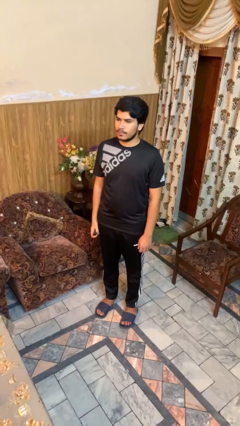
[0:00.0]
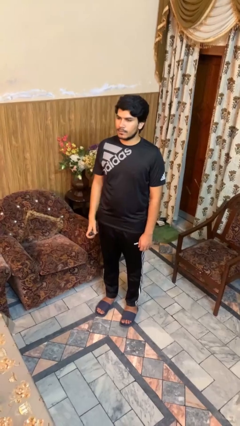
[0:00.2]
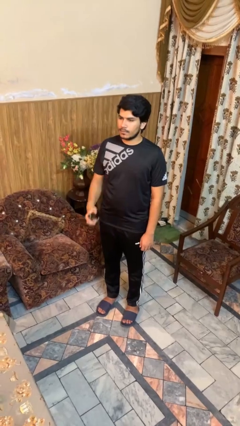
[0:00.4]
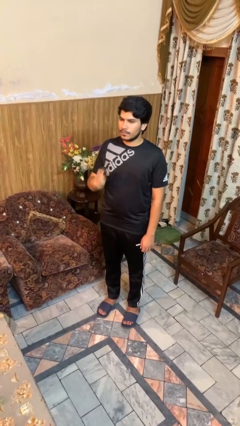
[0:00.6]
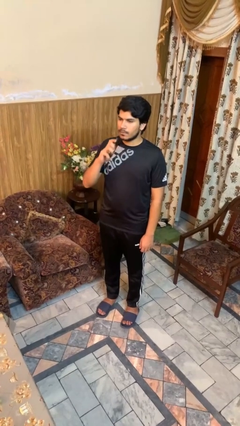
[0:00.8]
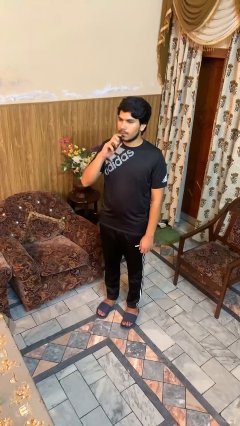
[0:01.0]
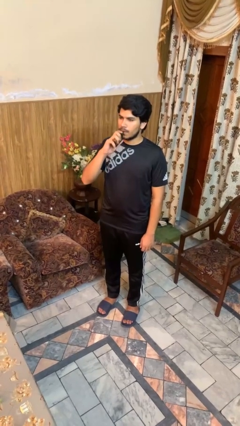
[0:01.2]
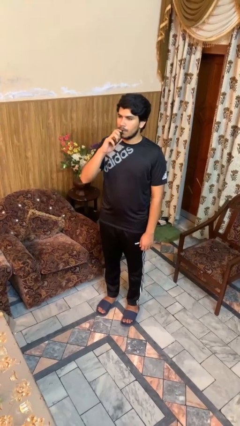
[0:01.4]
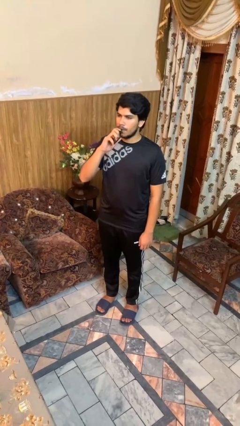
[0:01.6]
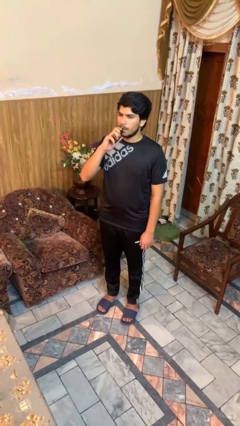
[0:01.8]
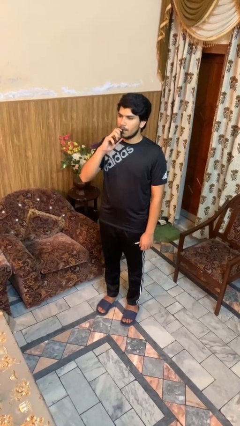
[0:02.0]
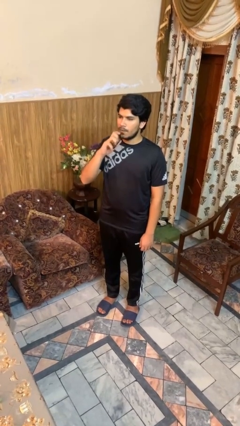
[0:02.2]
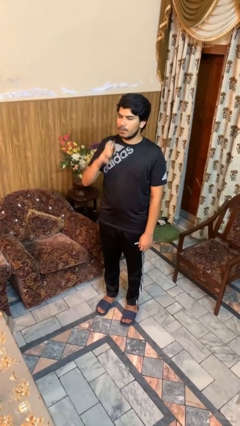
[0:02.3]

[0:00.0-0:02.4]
person vapes

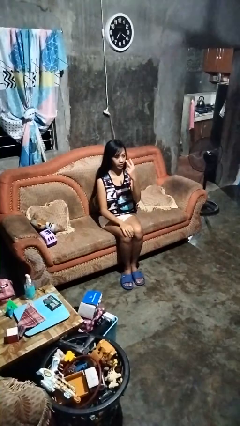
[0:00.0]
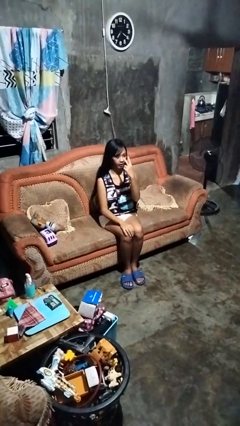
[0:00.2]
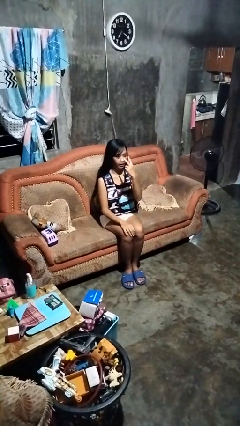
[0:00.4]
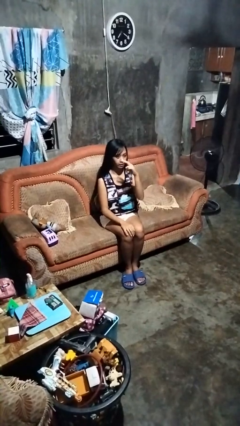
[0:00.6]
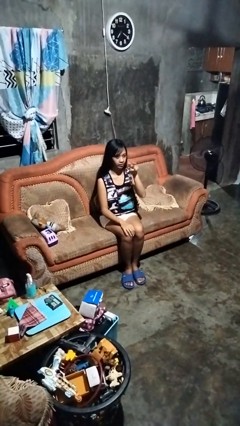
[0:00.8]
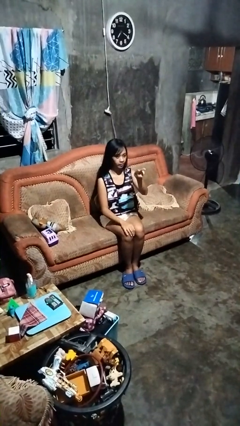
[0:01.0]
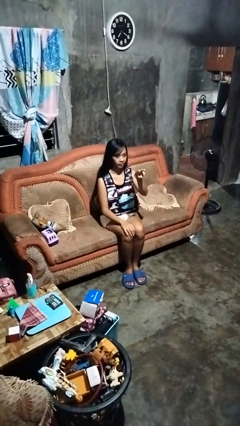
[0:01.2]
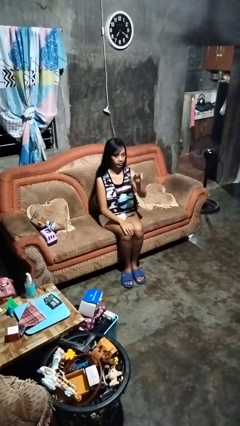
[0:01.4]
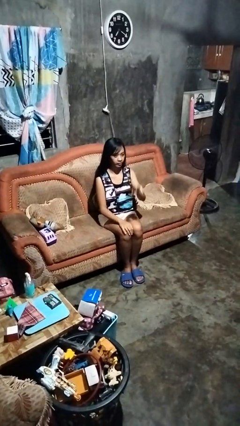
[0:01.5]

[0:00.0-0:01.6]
person gestures watch closely

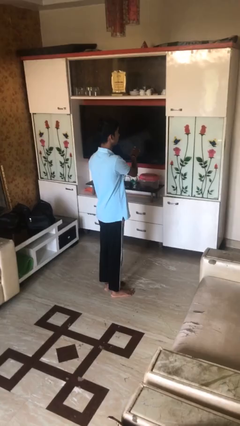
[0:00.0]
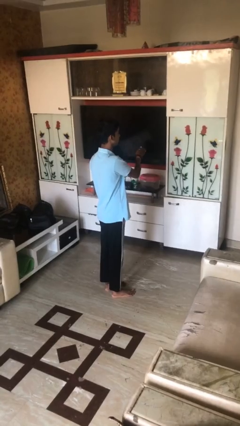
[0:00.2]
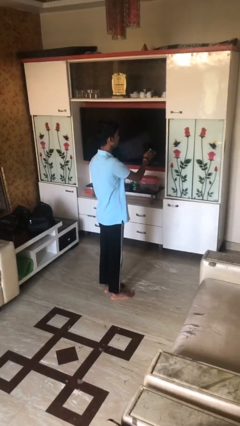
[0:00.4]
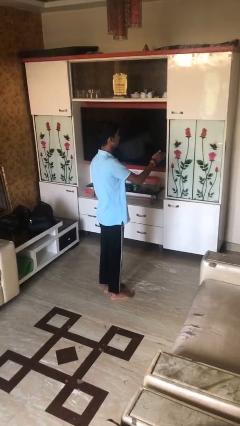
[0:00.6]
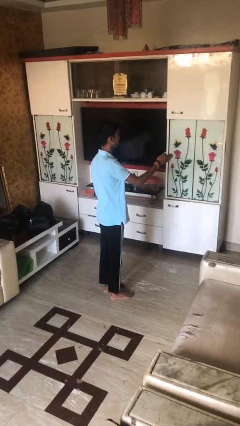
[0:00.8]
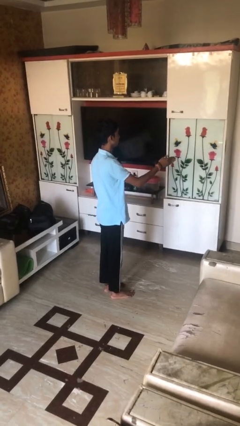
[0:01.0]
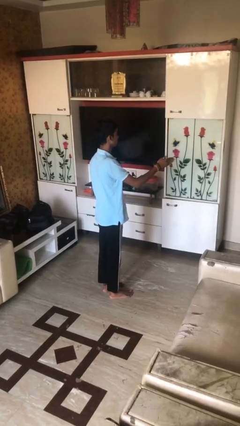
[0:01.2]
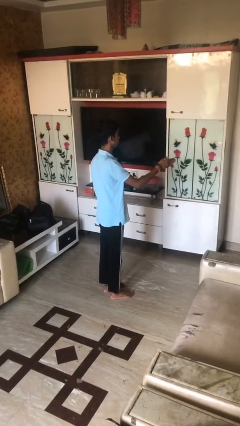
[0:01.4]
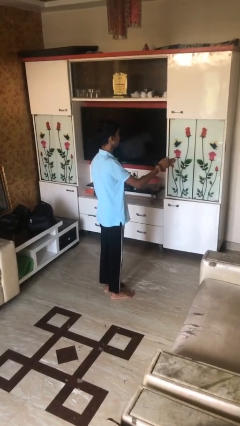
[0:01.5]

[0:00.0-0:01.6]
person gestures swipe right

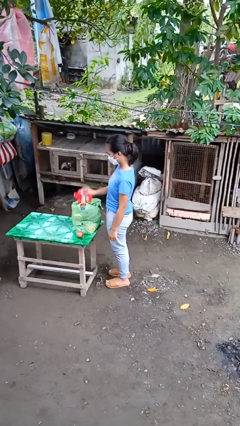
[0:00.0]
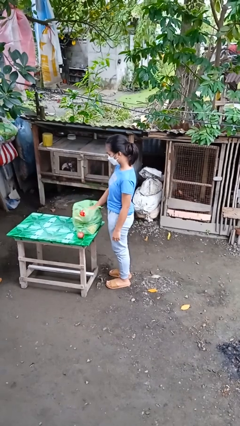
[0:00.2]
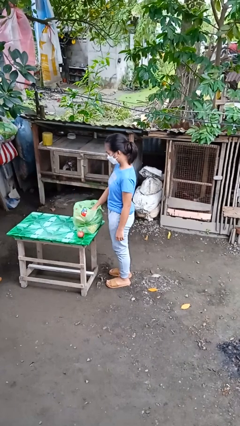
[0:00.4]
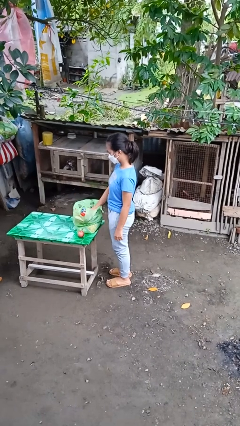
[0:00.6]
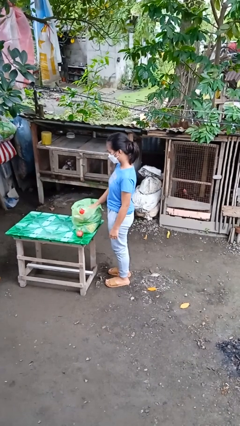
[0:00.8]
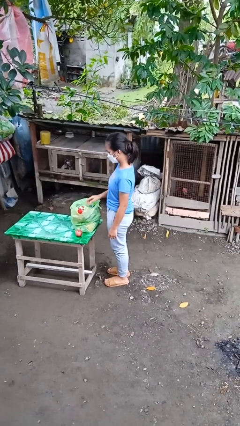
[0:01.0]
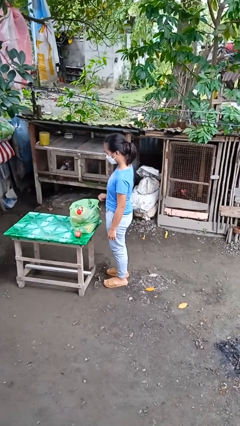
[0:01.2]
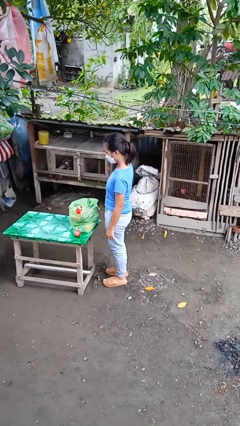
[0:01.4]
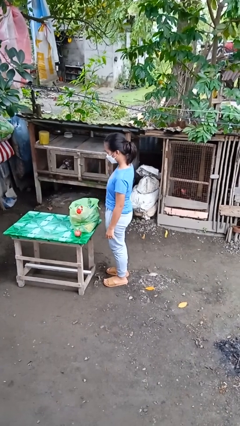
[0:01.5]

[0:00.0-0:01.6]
person puts object into bag

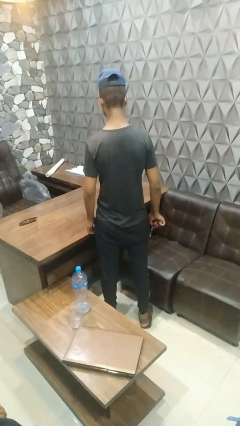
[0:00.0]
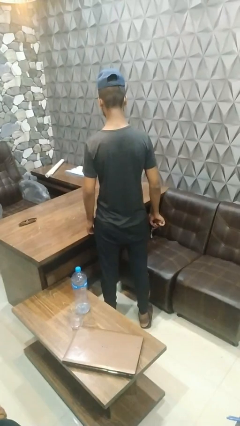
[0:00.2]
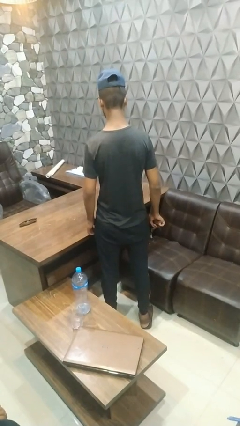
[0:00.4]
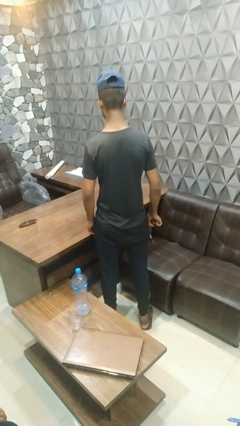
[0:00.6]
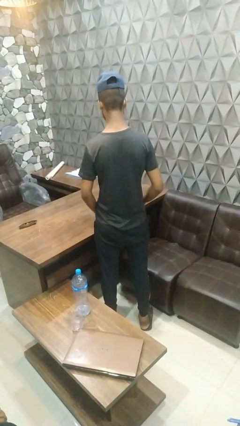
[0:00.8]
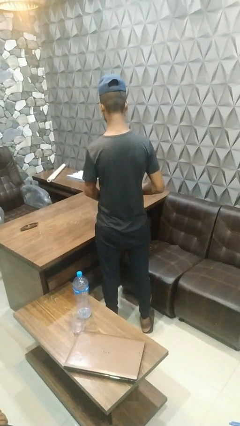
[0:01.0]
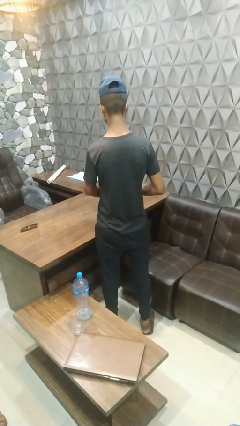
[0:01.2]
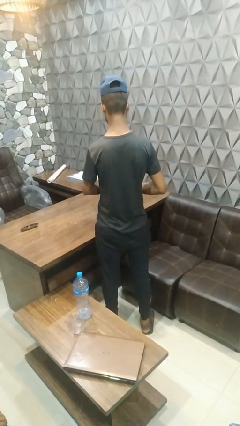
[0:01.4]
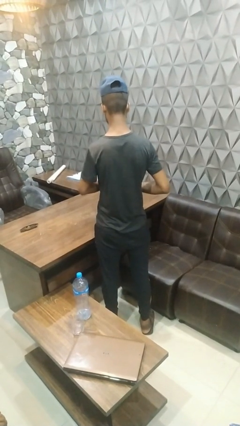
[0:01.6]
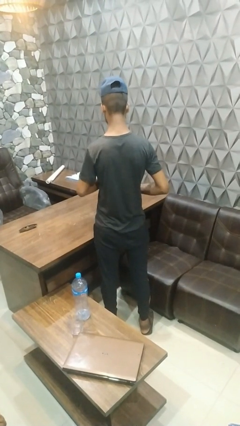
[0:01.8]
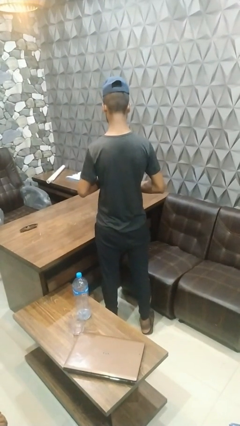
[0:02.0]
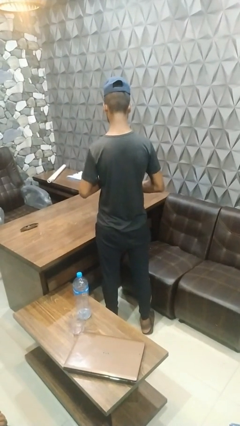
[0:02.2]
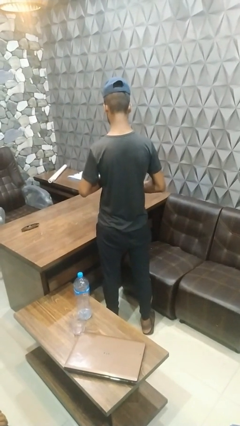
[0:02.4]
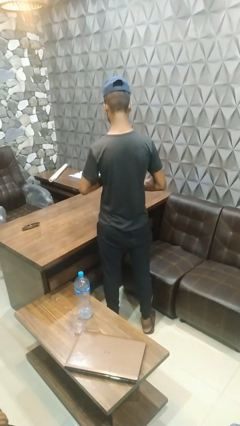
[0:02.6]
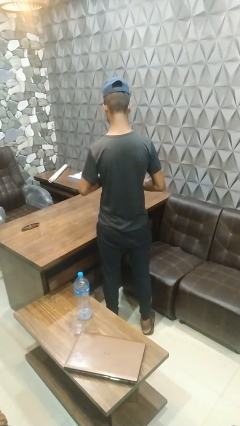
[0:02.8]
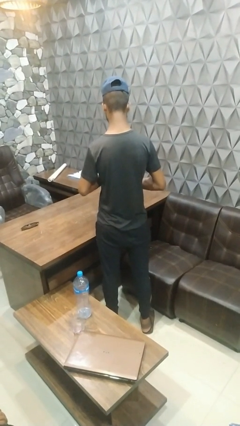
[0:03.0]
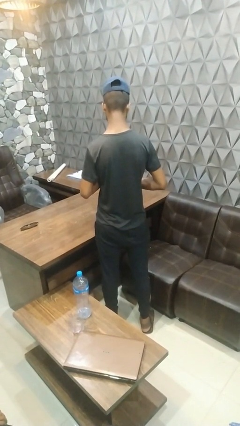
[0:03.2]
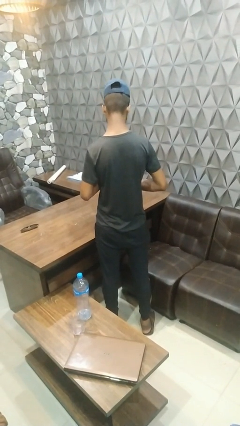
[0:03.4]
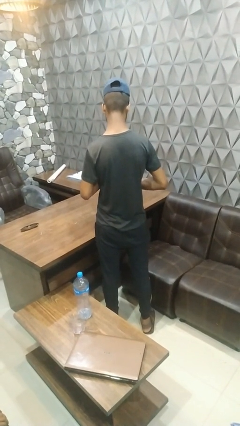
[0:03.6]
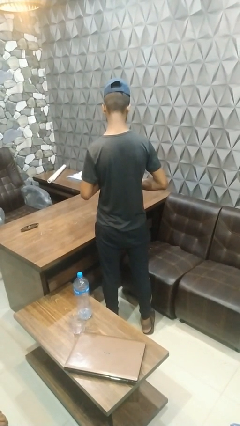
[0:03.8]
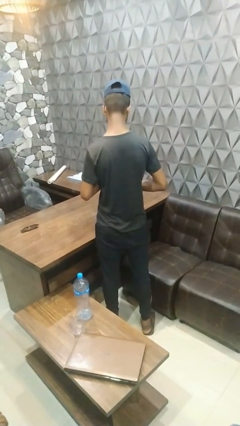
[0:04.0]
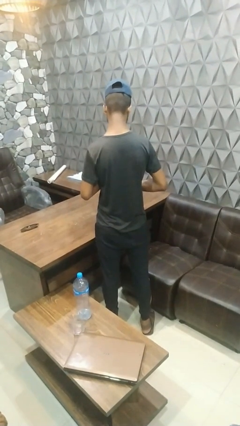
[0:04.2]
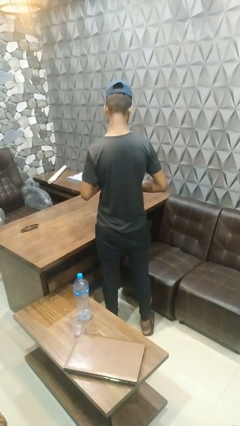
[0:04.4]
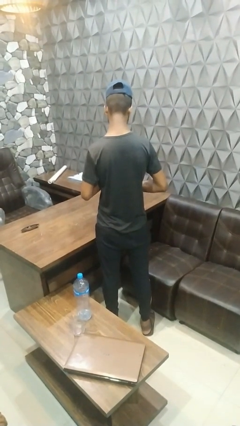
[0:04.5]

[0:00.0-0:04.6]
person puts on wristwatch

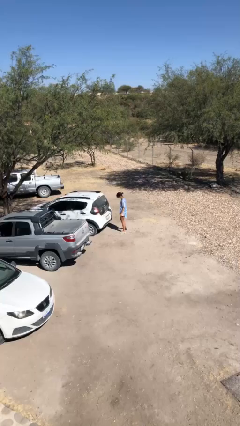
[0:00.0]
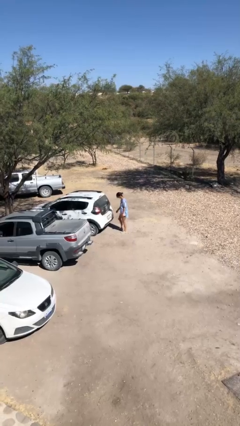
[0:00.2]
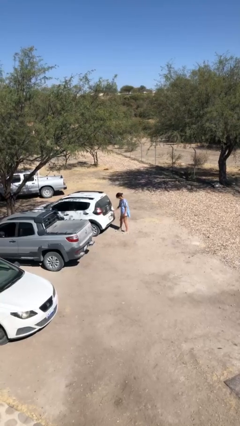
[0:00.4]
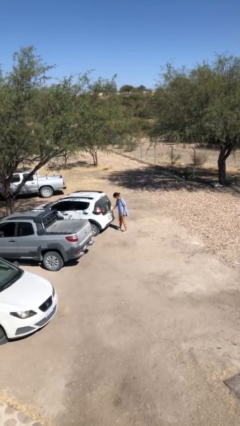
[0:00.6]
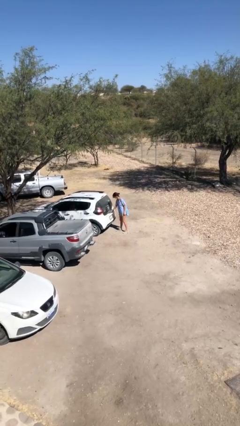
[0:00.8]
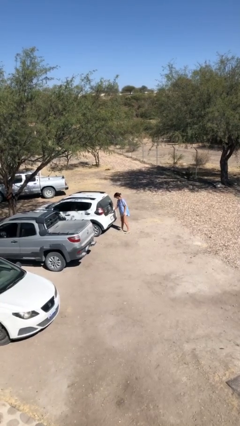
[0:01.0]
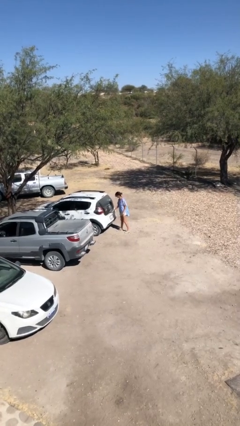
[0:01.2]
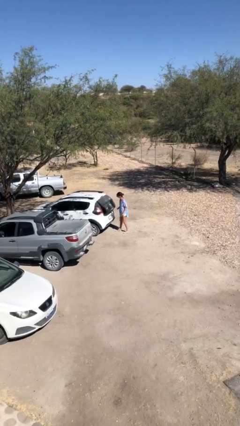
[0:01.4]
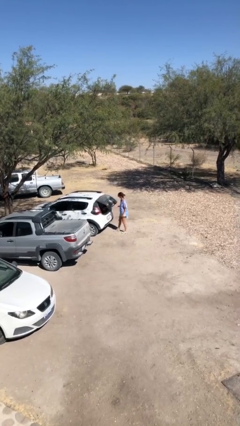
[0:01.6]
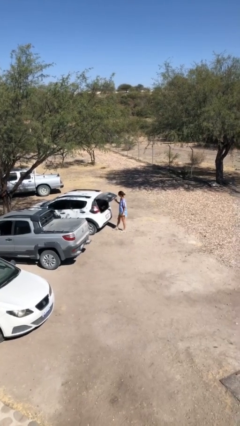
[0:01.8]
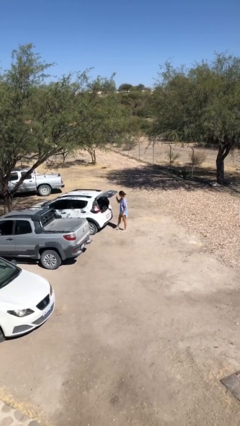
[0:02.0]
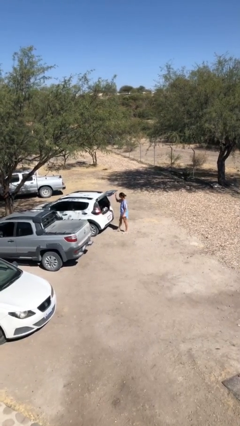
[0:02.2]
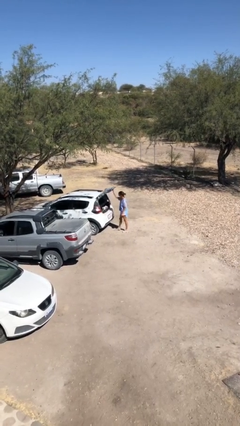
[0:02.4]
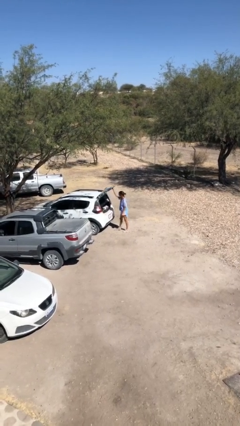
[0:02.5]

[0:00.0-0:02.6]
person opens car trunk

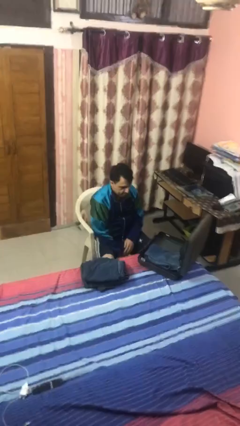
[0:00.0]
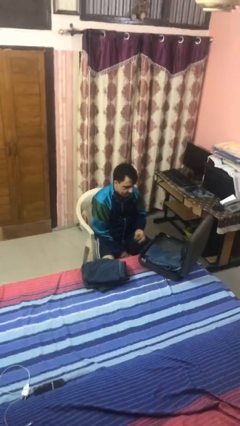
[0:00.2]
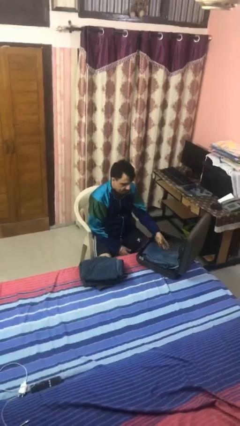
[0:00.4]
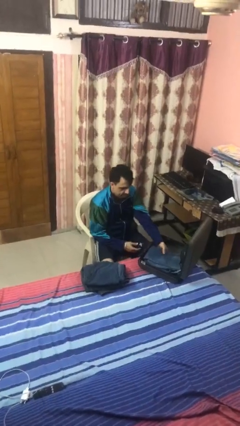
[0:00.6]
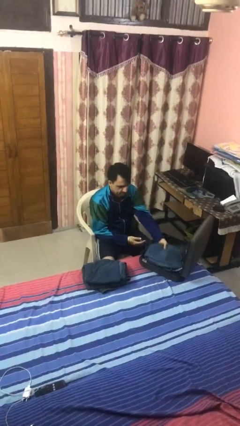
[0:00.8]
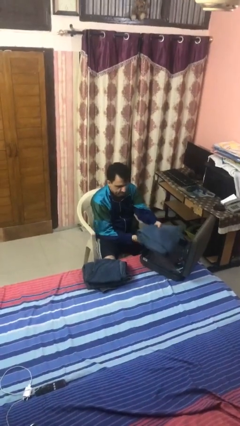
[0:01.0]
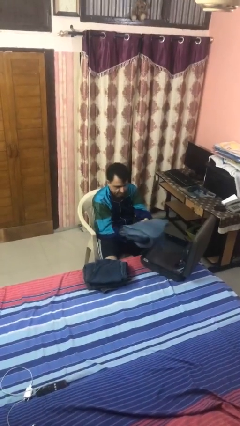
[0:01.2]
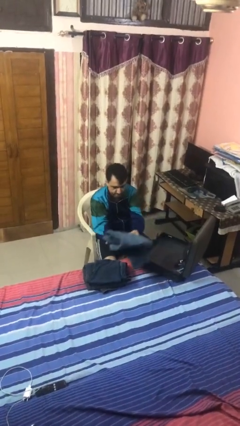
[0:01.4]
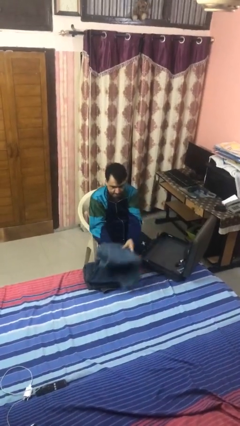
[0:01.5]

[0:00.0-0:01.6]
person unloads clothes from suitcase

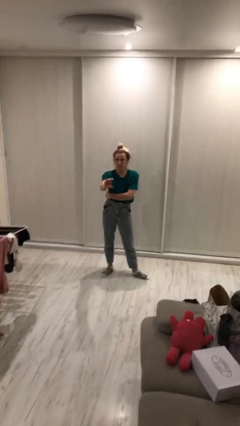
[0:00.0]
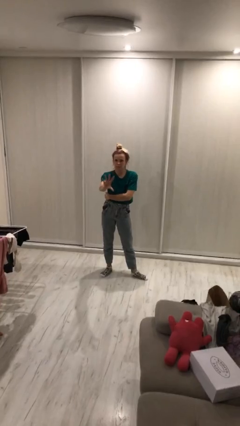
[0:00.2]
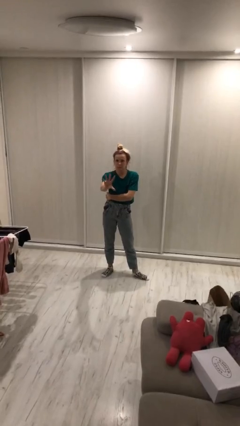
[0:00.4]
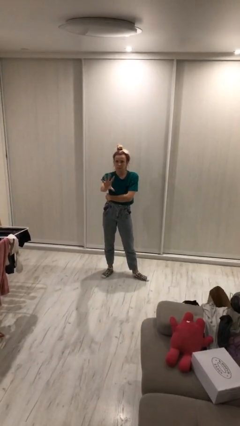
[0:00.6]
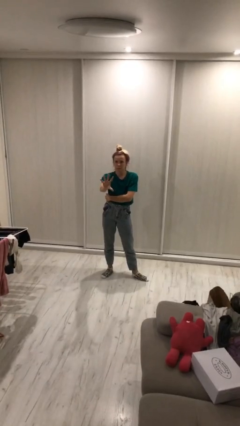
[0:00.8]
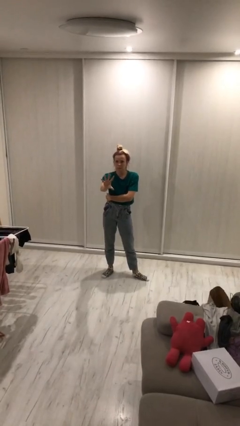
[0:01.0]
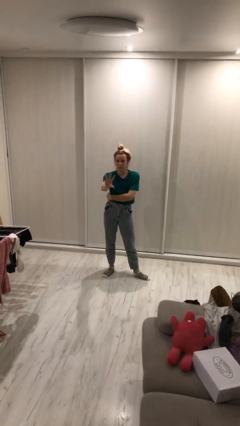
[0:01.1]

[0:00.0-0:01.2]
person gestures zoom in
